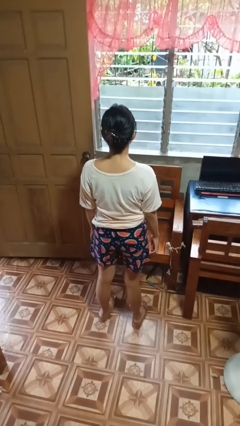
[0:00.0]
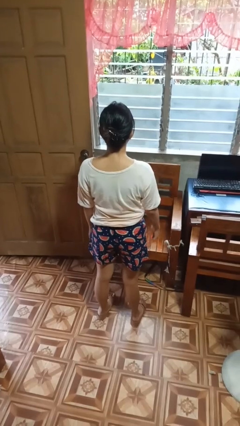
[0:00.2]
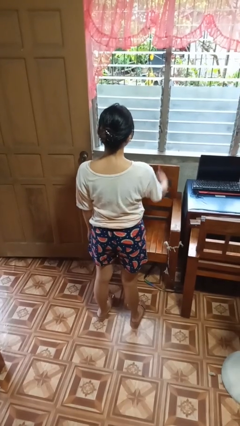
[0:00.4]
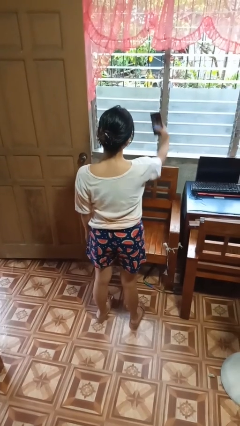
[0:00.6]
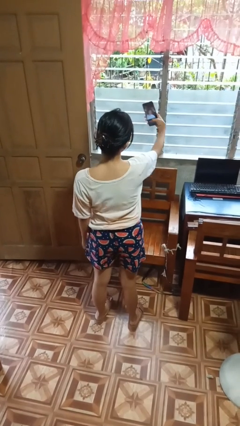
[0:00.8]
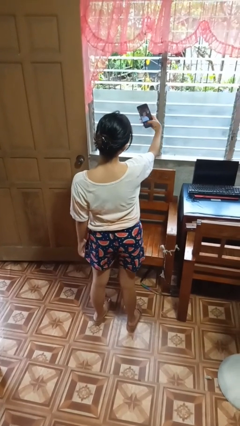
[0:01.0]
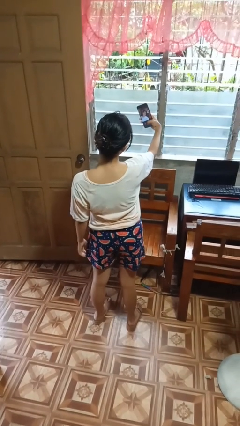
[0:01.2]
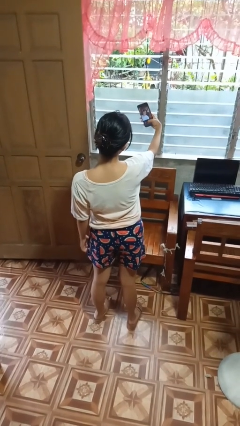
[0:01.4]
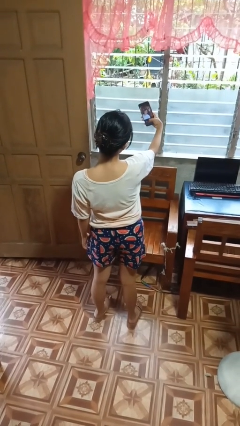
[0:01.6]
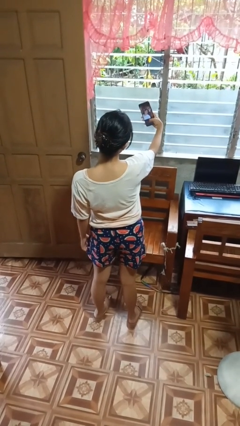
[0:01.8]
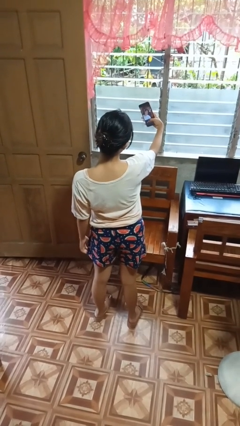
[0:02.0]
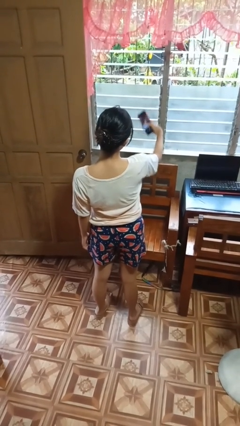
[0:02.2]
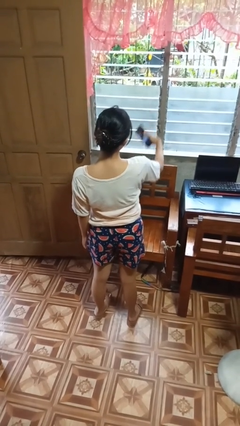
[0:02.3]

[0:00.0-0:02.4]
person takes selfie

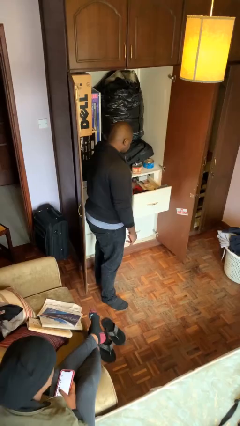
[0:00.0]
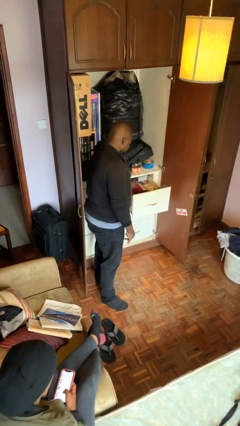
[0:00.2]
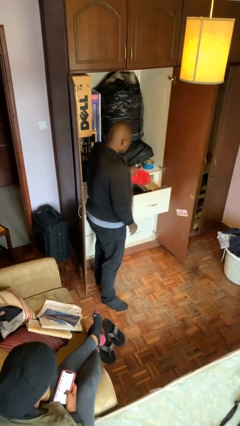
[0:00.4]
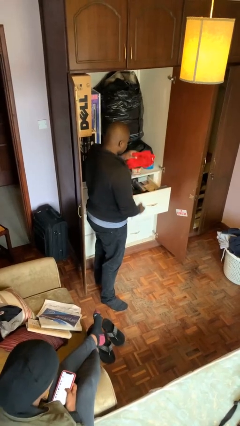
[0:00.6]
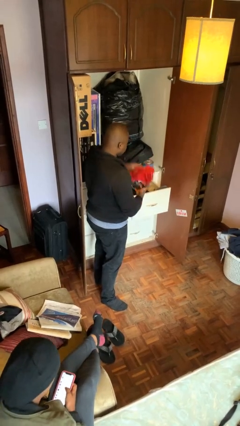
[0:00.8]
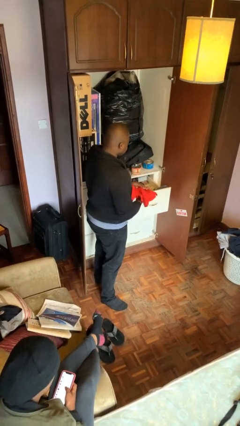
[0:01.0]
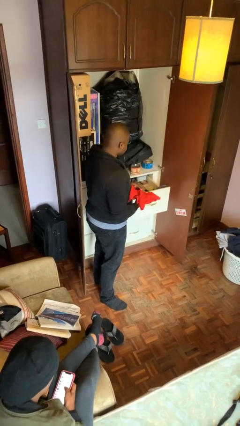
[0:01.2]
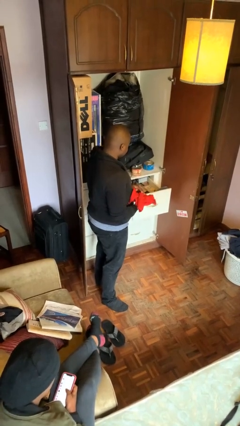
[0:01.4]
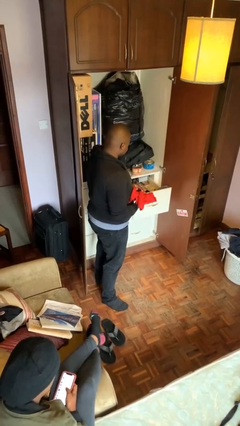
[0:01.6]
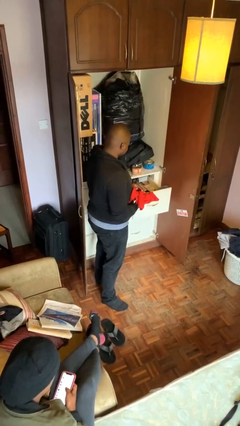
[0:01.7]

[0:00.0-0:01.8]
person takes clothes from dresser

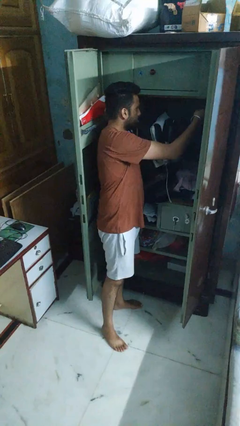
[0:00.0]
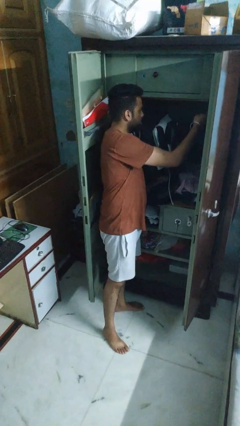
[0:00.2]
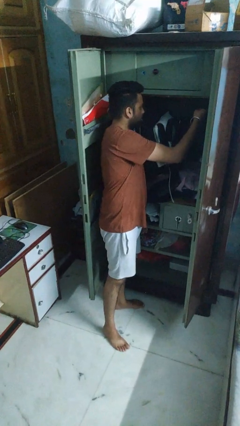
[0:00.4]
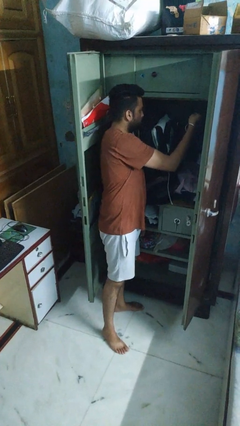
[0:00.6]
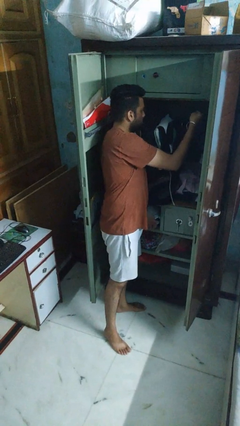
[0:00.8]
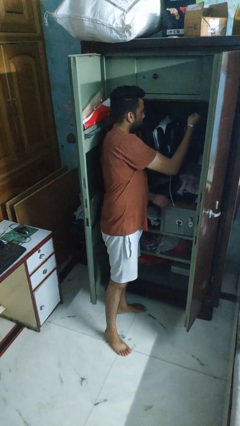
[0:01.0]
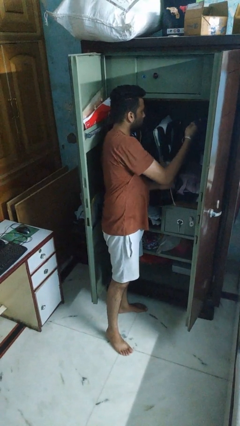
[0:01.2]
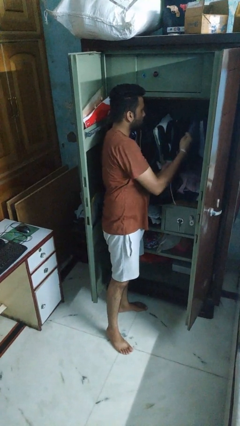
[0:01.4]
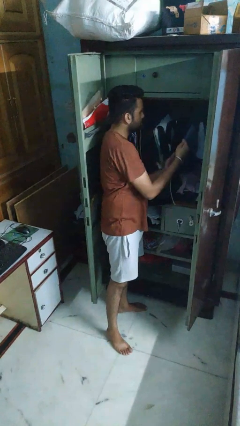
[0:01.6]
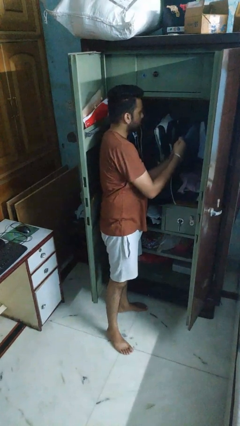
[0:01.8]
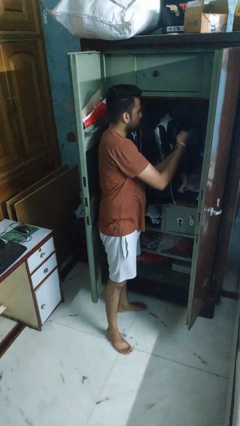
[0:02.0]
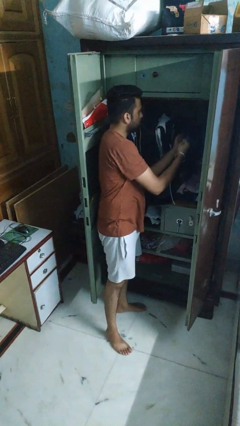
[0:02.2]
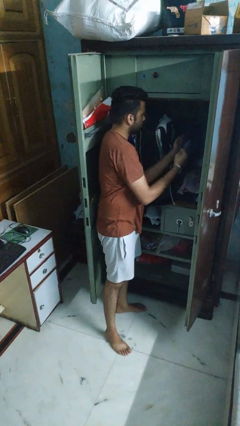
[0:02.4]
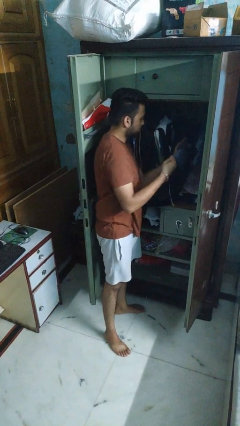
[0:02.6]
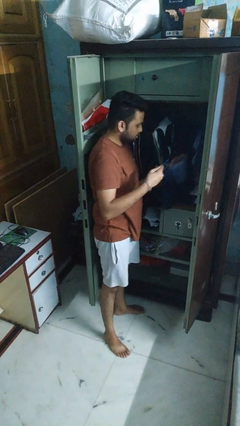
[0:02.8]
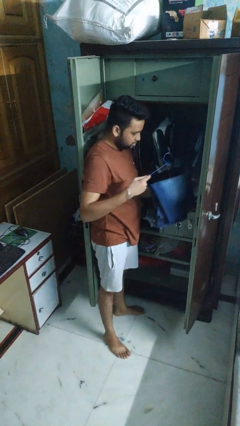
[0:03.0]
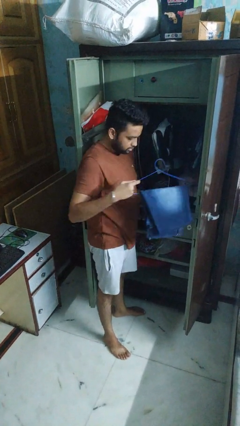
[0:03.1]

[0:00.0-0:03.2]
person takes clothes from closet

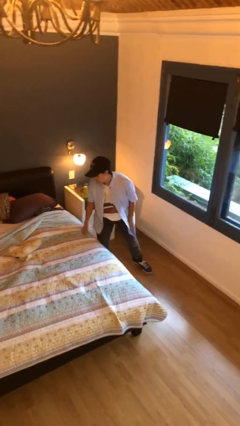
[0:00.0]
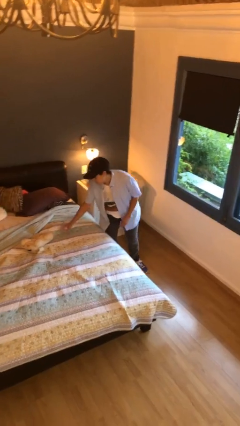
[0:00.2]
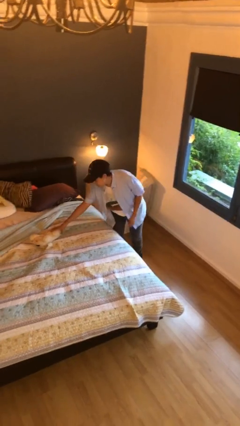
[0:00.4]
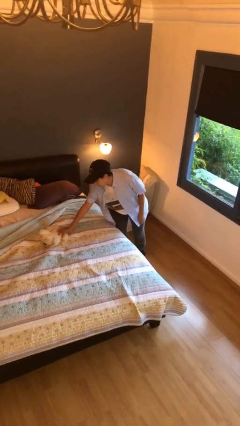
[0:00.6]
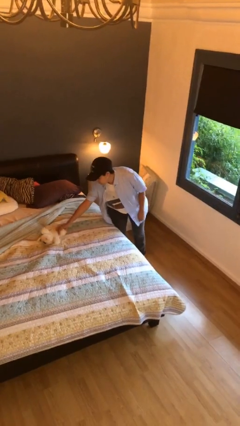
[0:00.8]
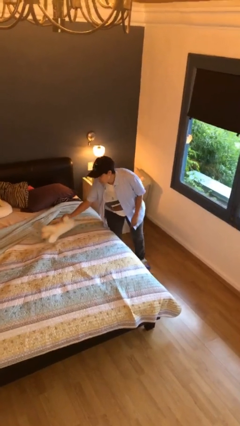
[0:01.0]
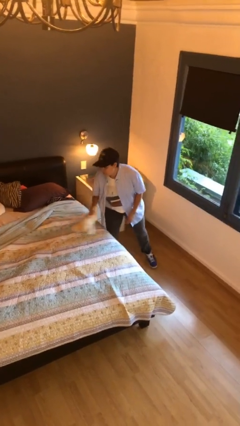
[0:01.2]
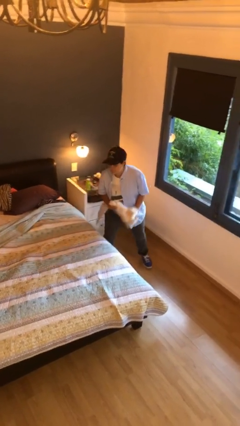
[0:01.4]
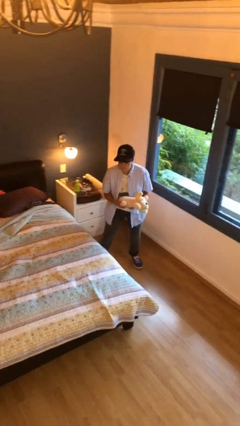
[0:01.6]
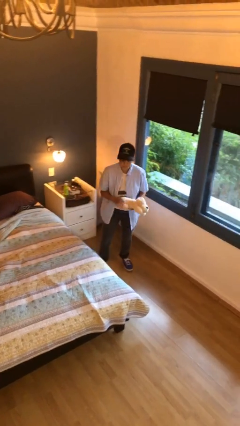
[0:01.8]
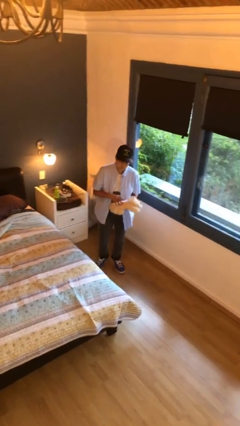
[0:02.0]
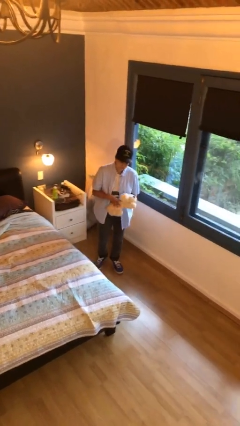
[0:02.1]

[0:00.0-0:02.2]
person picks up object from bed

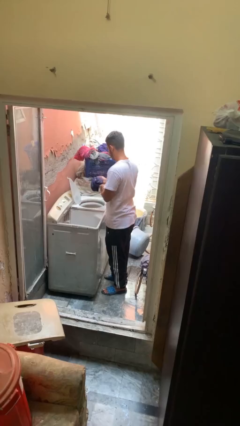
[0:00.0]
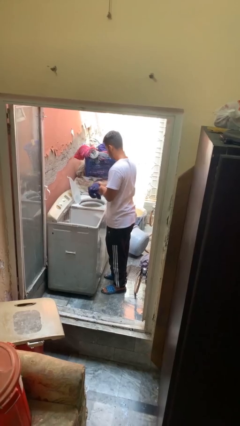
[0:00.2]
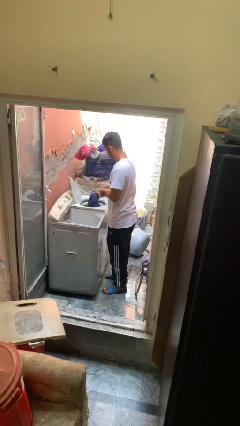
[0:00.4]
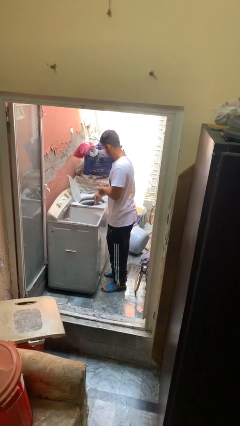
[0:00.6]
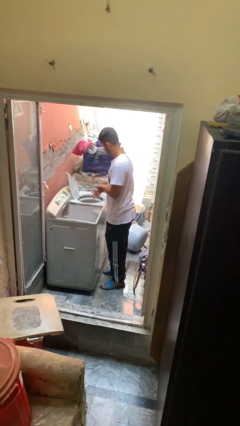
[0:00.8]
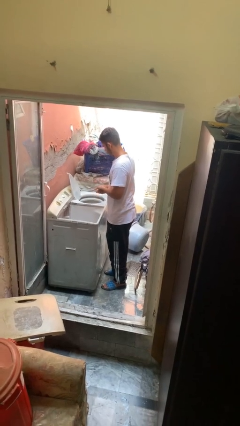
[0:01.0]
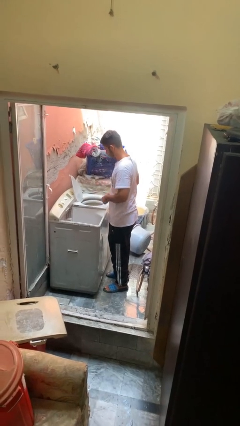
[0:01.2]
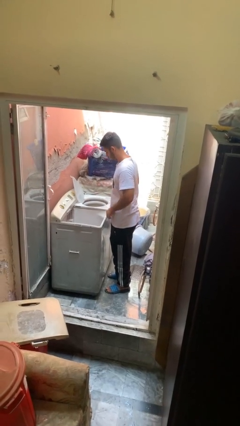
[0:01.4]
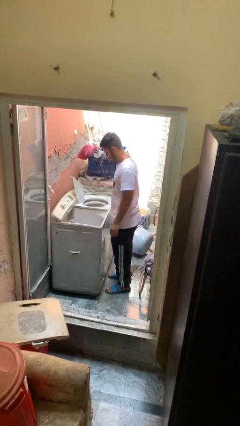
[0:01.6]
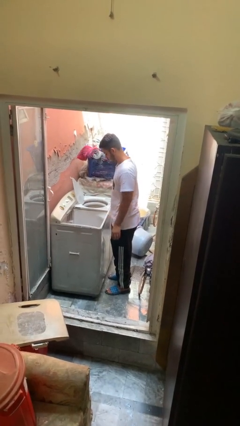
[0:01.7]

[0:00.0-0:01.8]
person loads dryer

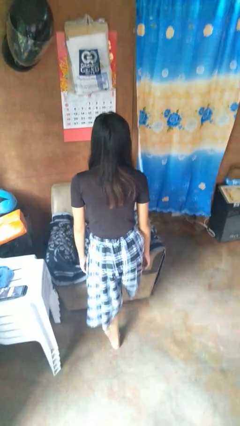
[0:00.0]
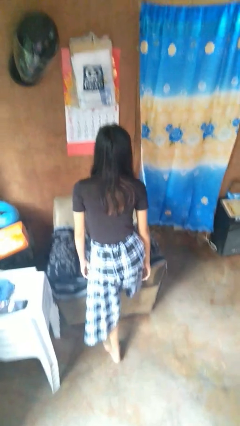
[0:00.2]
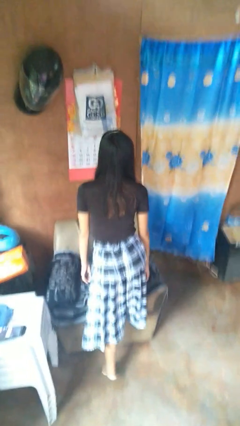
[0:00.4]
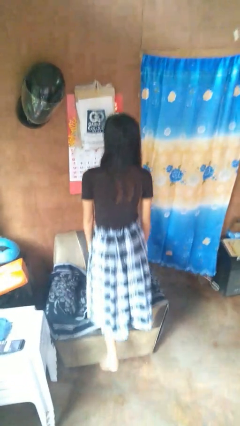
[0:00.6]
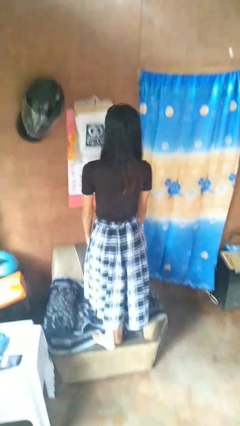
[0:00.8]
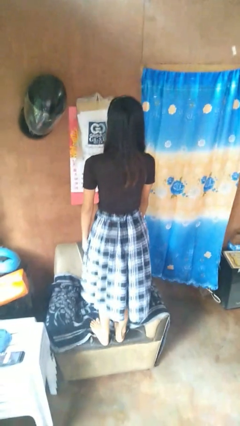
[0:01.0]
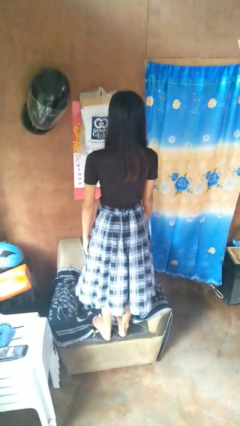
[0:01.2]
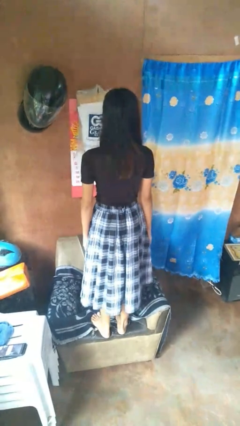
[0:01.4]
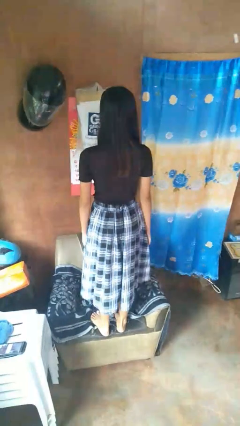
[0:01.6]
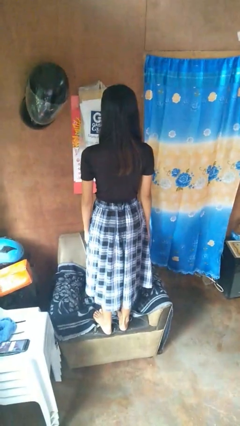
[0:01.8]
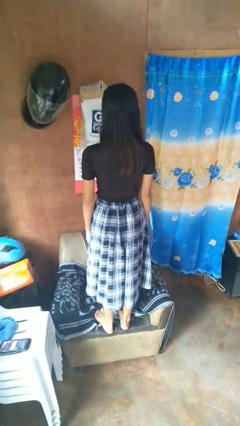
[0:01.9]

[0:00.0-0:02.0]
person climbs on couch

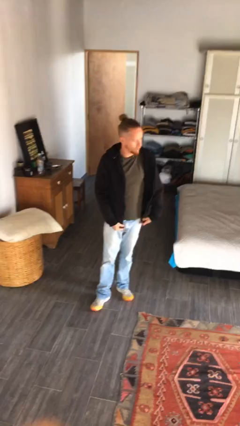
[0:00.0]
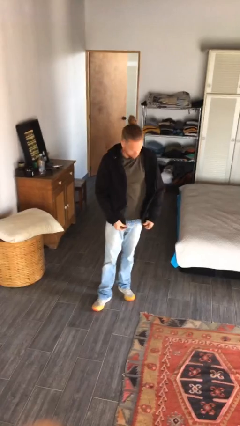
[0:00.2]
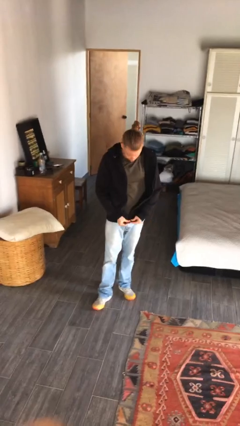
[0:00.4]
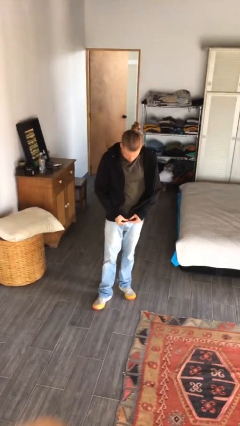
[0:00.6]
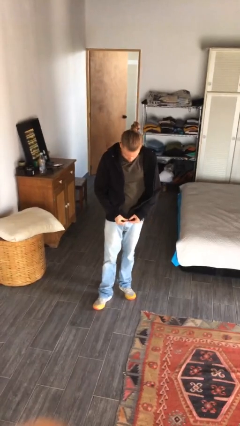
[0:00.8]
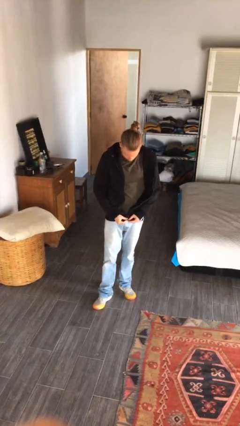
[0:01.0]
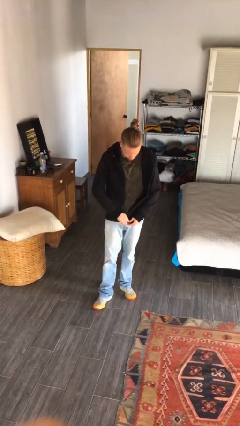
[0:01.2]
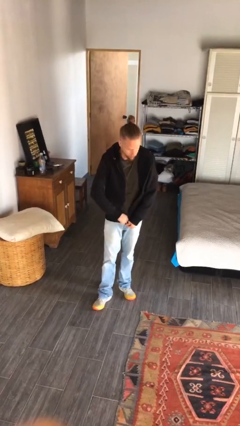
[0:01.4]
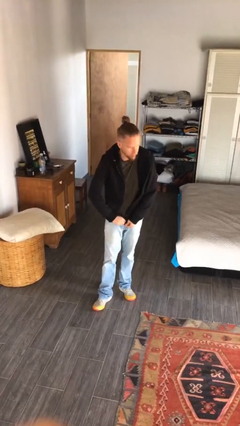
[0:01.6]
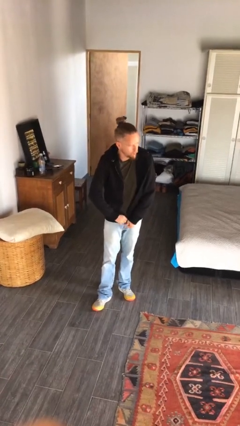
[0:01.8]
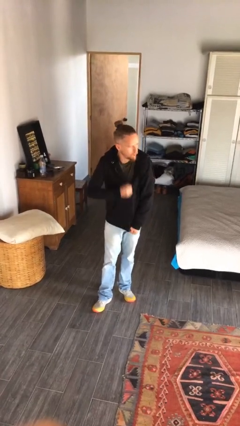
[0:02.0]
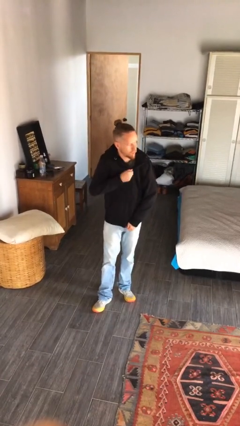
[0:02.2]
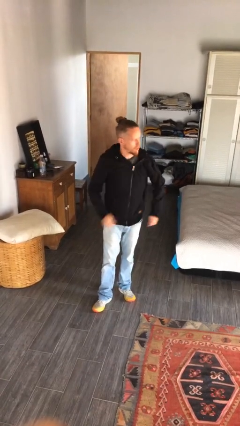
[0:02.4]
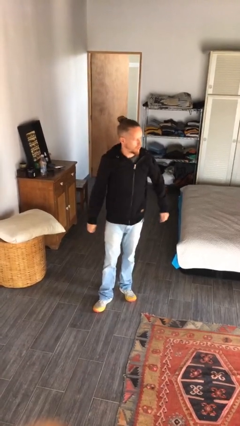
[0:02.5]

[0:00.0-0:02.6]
person zips up jacket

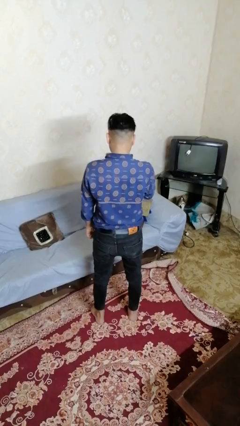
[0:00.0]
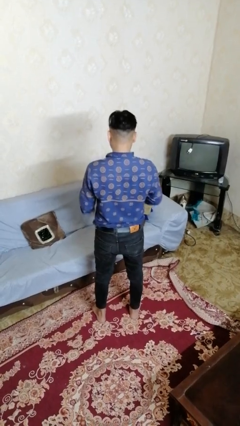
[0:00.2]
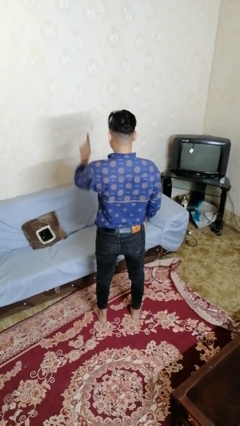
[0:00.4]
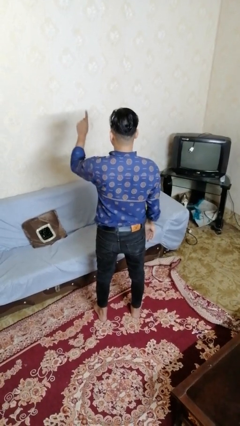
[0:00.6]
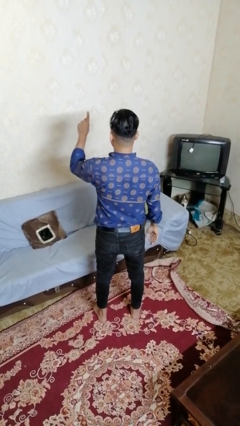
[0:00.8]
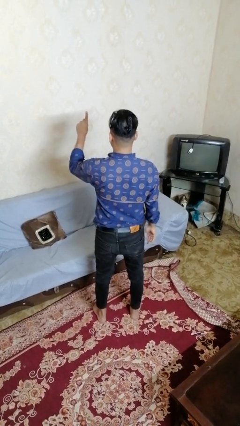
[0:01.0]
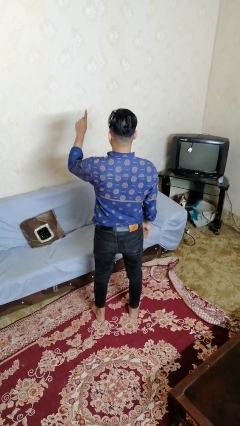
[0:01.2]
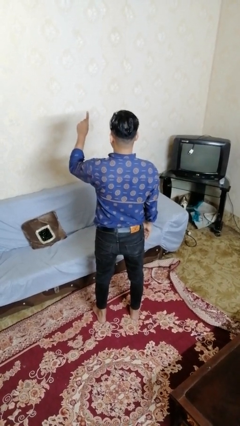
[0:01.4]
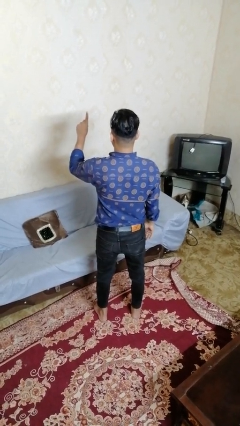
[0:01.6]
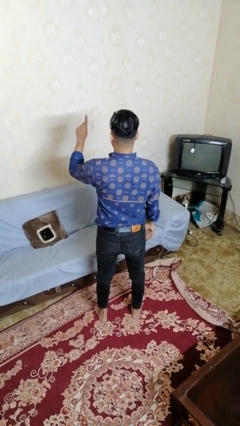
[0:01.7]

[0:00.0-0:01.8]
person gestures number one
